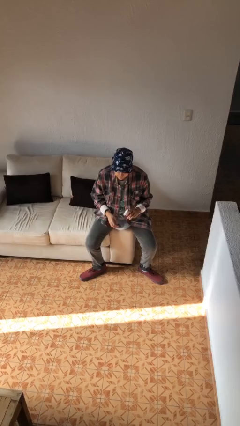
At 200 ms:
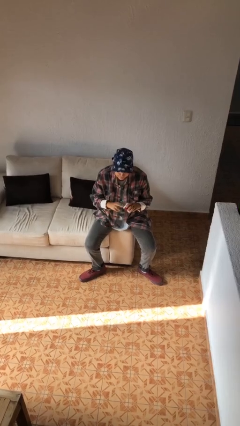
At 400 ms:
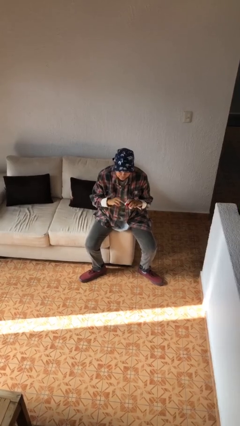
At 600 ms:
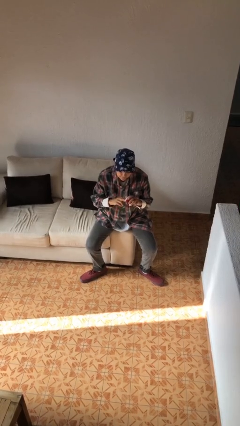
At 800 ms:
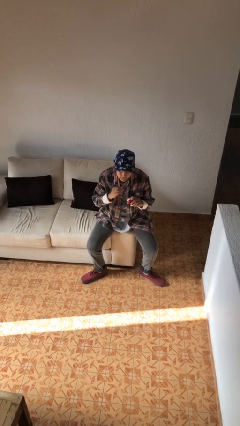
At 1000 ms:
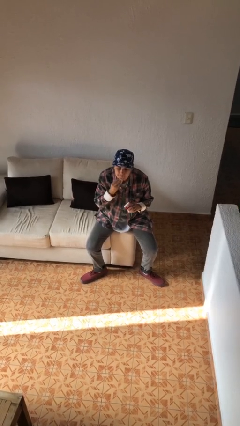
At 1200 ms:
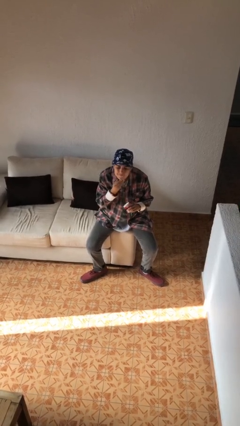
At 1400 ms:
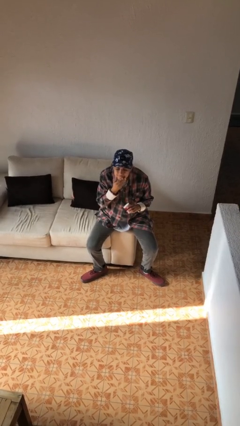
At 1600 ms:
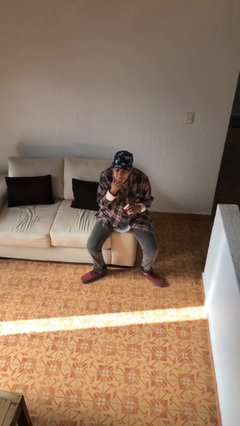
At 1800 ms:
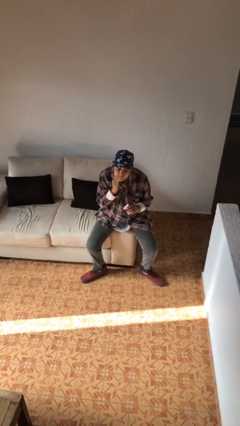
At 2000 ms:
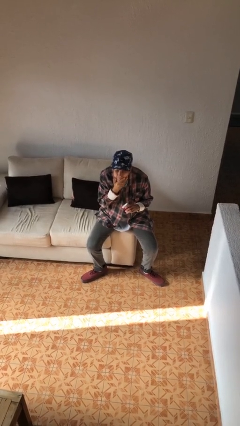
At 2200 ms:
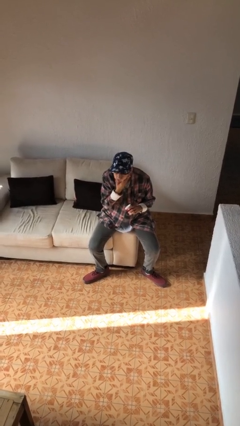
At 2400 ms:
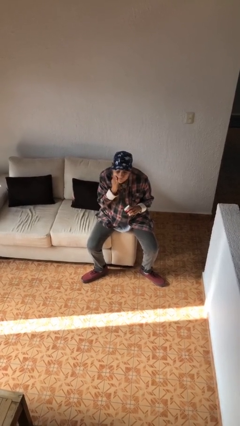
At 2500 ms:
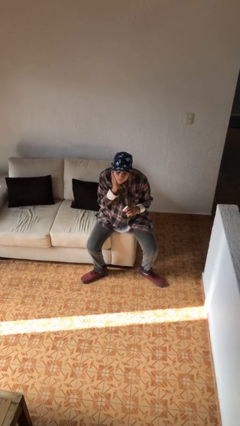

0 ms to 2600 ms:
person applies facial moisturizer

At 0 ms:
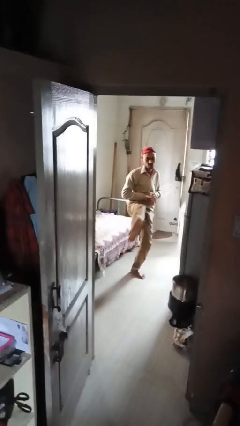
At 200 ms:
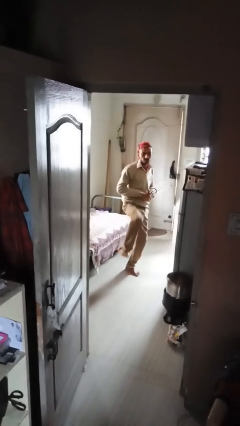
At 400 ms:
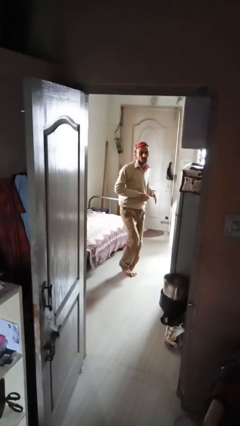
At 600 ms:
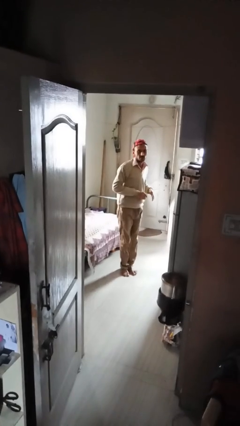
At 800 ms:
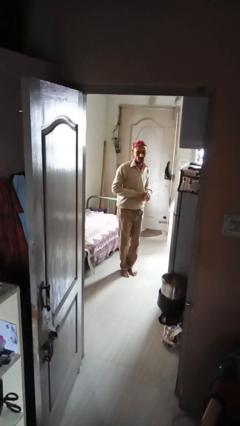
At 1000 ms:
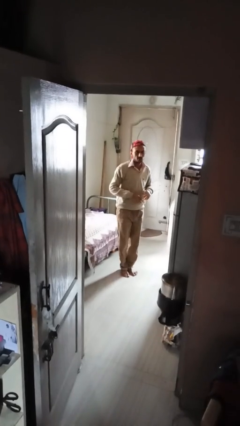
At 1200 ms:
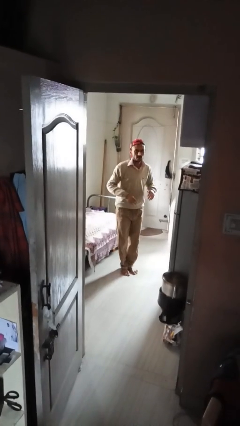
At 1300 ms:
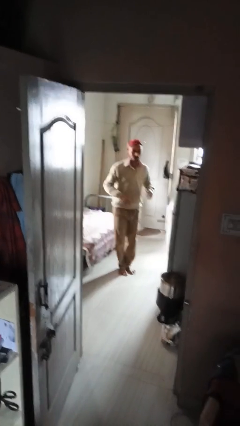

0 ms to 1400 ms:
person karate kicks

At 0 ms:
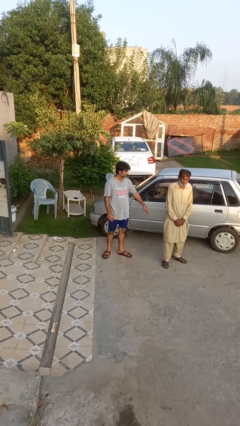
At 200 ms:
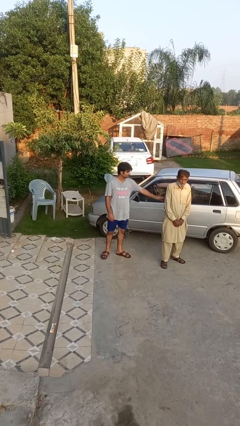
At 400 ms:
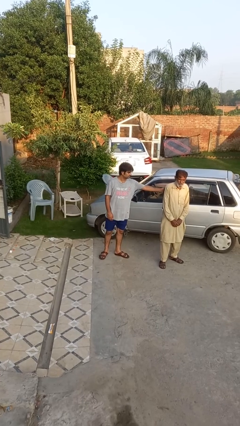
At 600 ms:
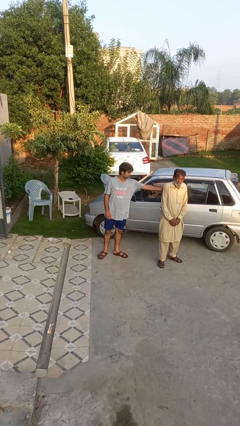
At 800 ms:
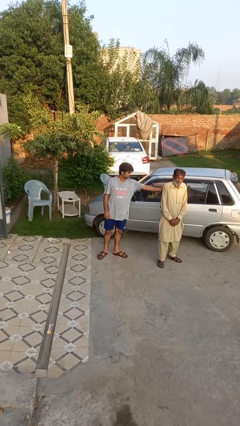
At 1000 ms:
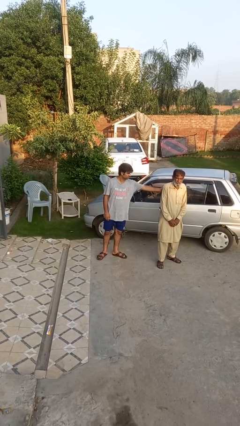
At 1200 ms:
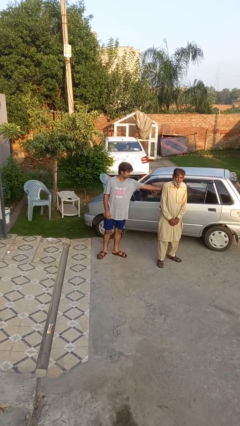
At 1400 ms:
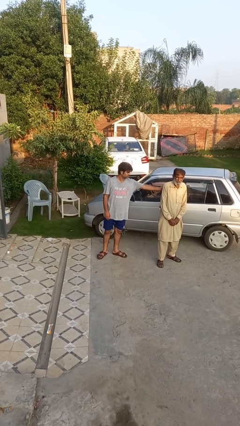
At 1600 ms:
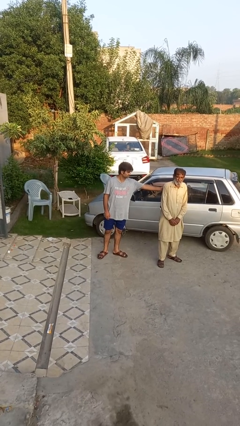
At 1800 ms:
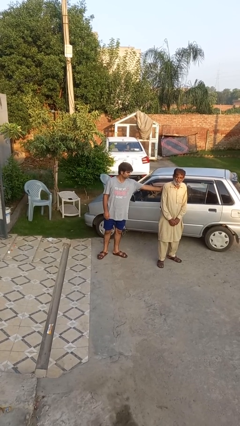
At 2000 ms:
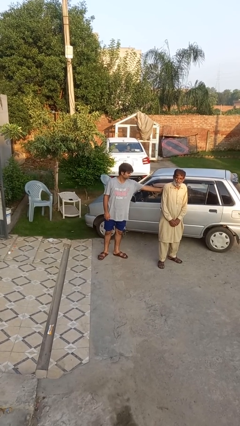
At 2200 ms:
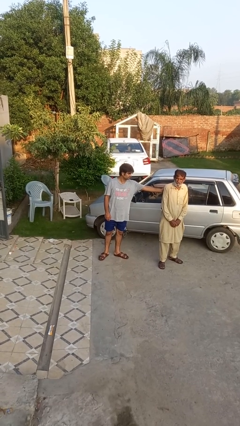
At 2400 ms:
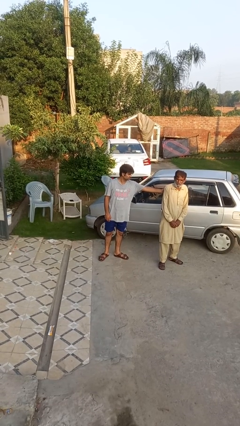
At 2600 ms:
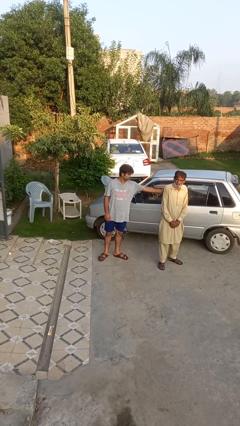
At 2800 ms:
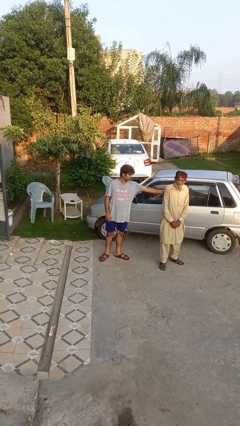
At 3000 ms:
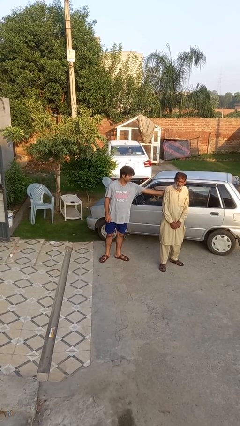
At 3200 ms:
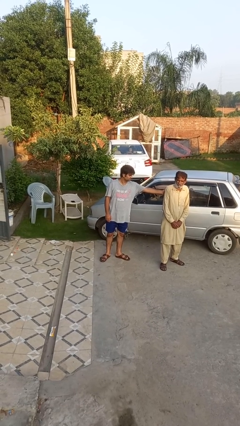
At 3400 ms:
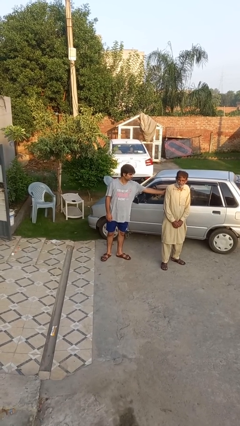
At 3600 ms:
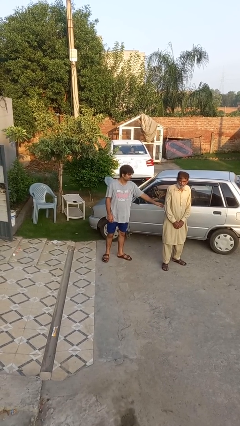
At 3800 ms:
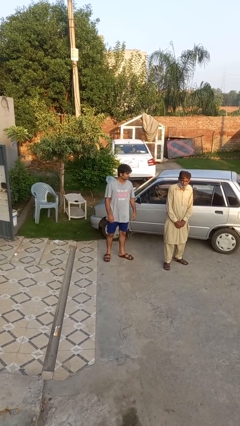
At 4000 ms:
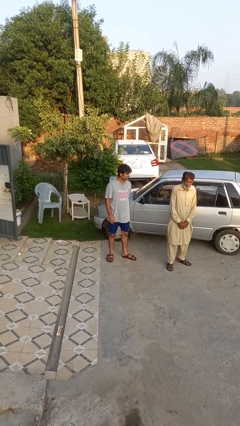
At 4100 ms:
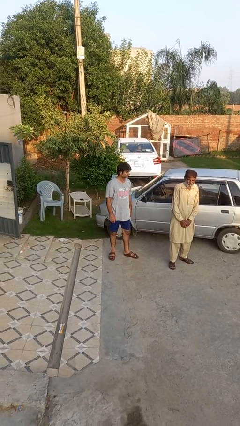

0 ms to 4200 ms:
person touches back of person

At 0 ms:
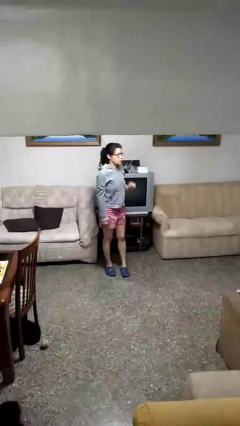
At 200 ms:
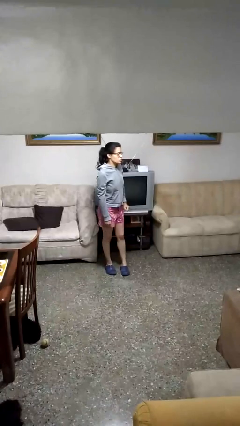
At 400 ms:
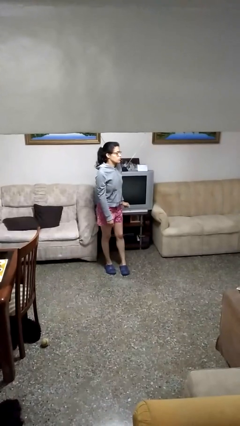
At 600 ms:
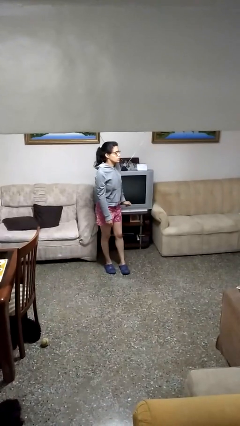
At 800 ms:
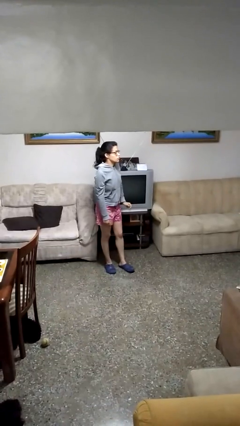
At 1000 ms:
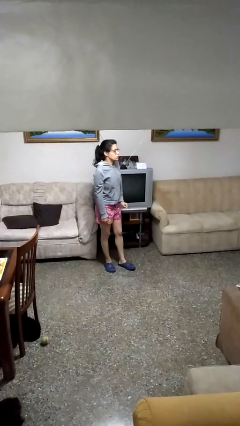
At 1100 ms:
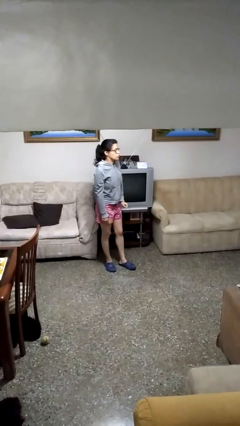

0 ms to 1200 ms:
person gestures lower hand

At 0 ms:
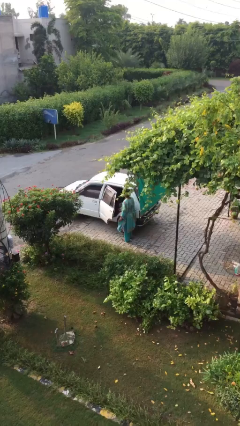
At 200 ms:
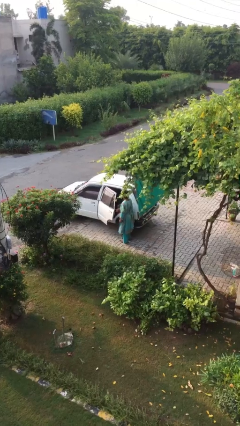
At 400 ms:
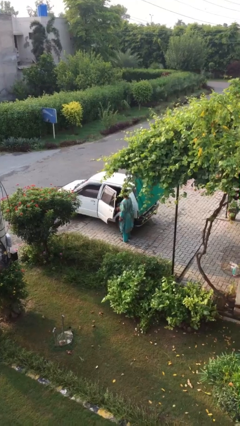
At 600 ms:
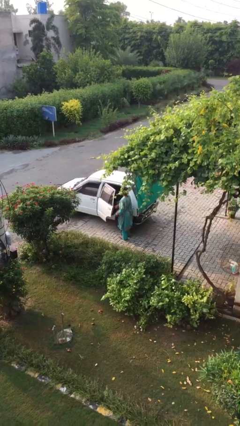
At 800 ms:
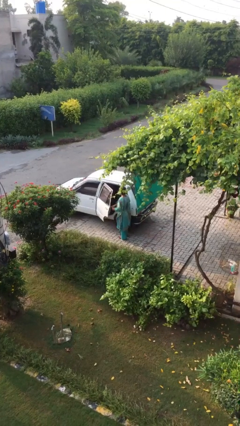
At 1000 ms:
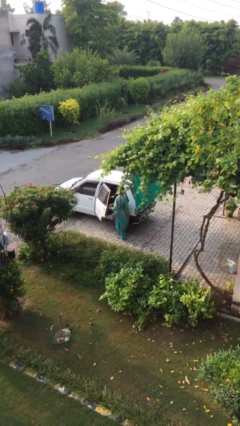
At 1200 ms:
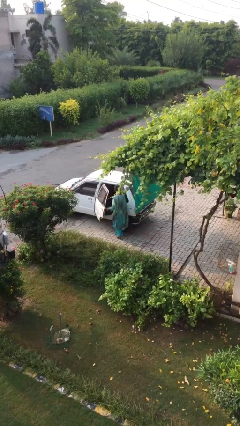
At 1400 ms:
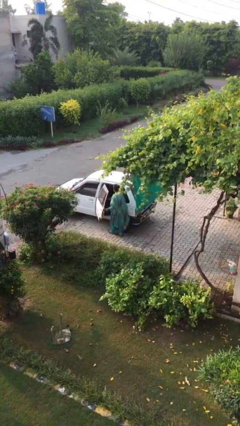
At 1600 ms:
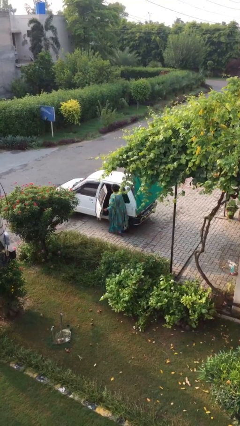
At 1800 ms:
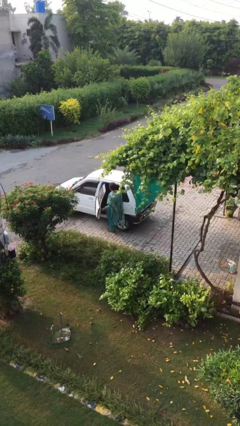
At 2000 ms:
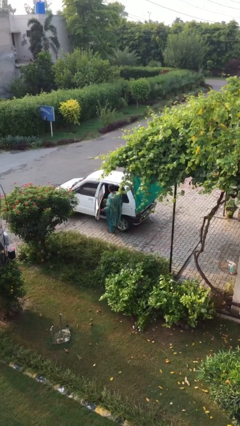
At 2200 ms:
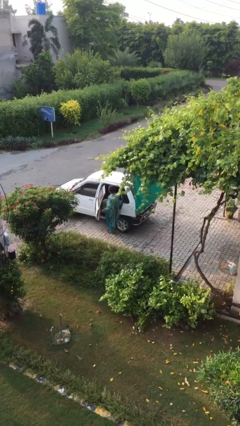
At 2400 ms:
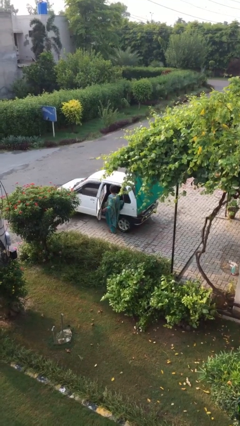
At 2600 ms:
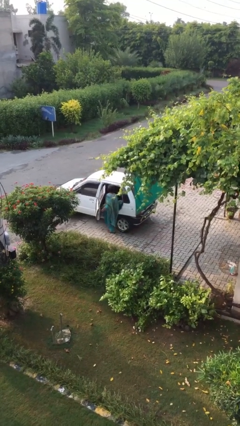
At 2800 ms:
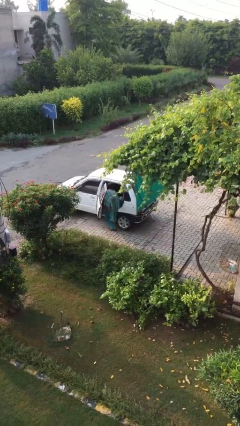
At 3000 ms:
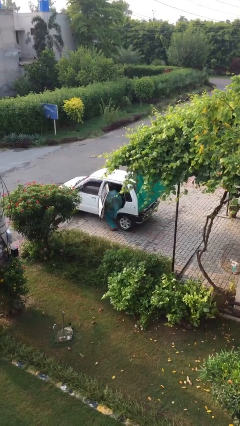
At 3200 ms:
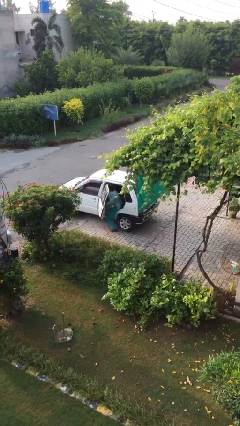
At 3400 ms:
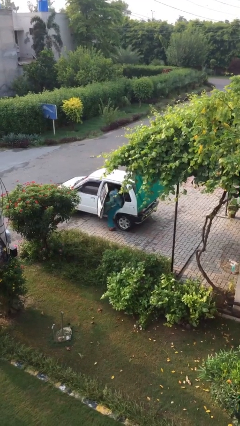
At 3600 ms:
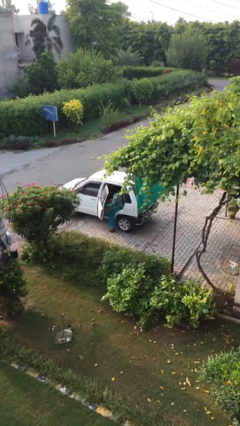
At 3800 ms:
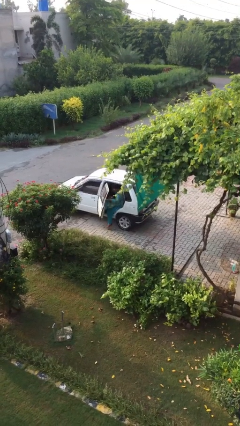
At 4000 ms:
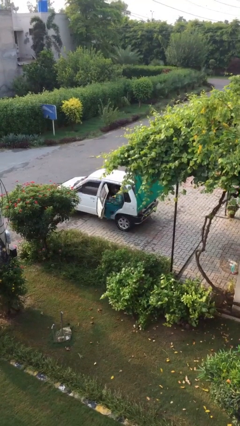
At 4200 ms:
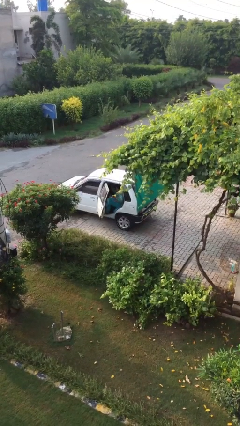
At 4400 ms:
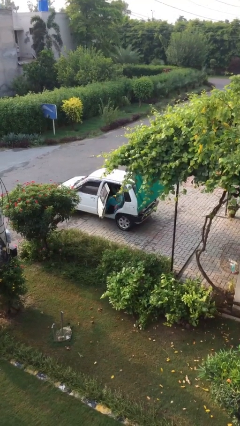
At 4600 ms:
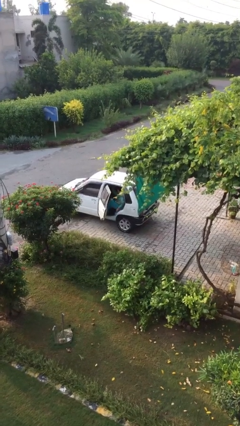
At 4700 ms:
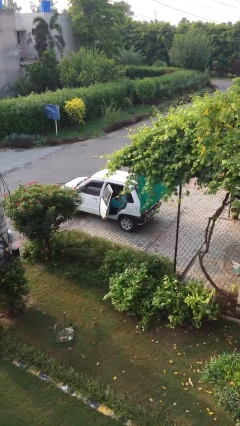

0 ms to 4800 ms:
person enters car

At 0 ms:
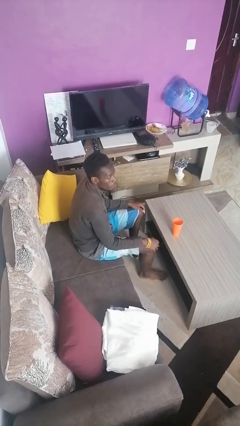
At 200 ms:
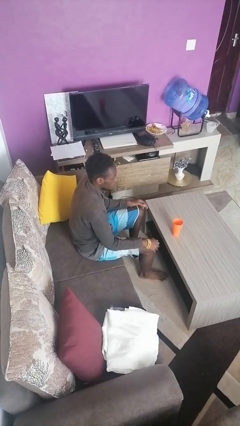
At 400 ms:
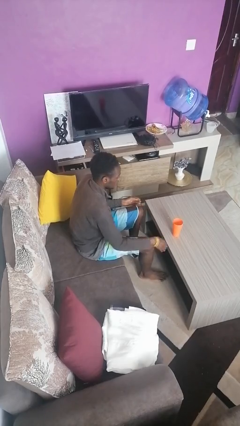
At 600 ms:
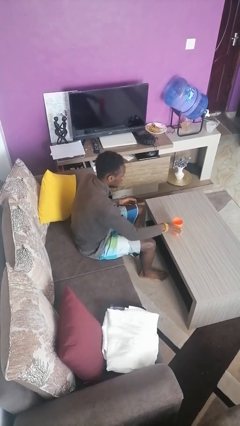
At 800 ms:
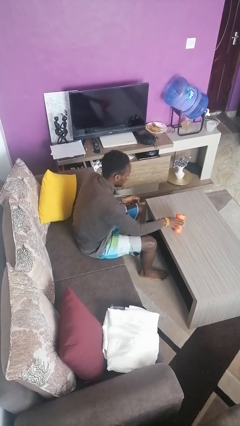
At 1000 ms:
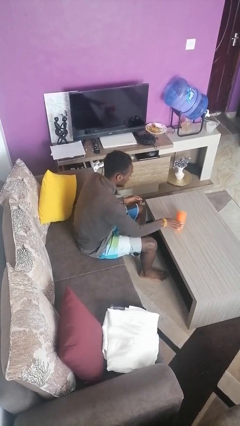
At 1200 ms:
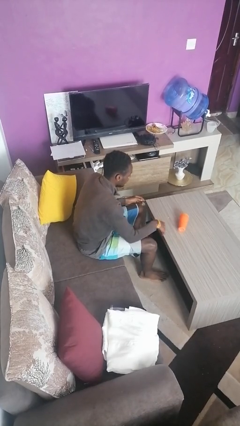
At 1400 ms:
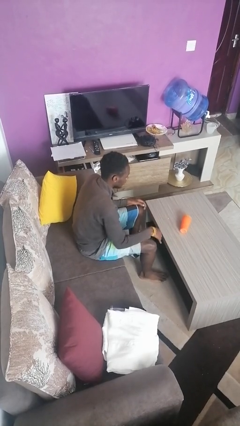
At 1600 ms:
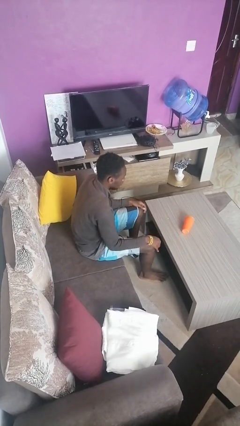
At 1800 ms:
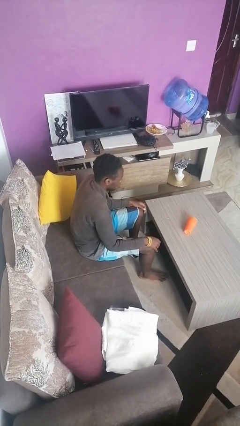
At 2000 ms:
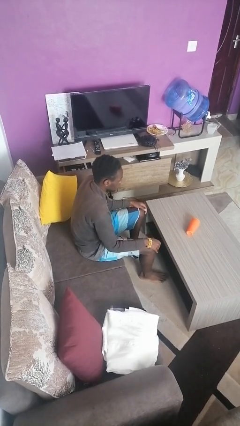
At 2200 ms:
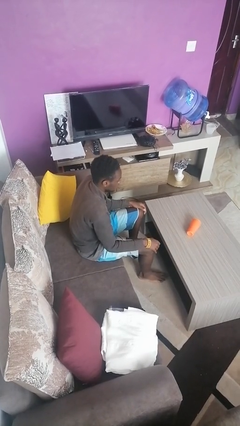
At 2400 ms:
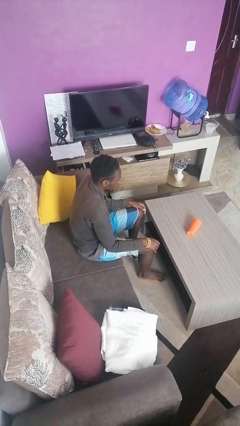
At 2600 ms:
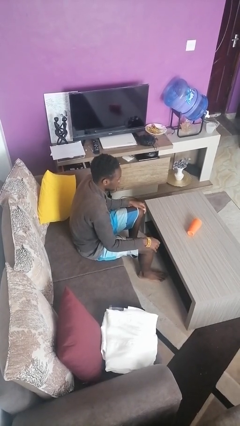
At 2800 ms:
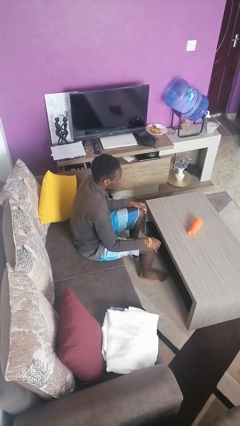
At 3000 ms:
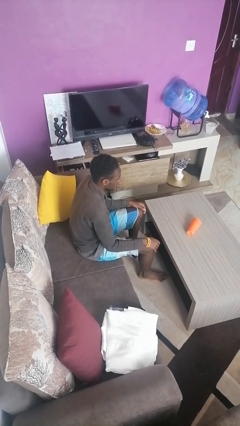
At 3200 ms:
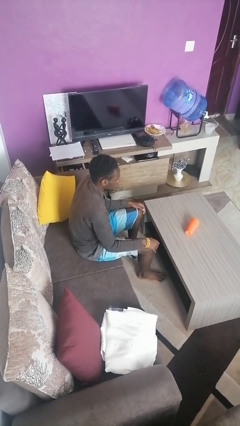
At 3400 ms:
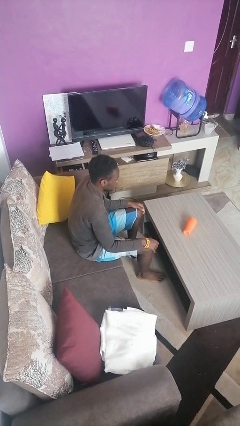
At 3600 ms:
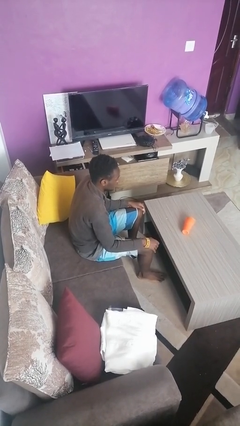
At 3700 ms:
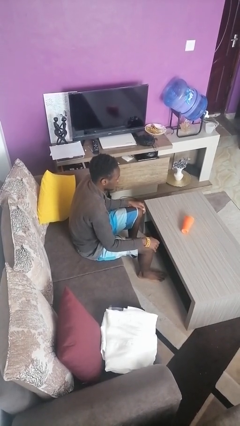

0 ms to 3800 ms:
person knocks over glass
